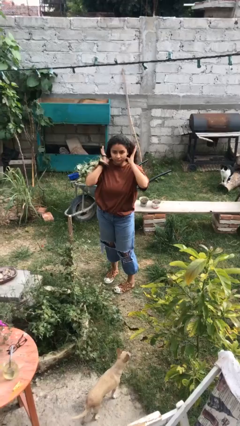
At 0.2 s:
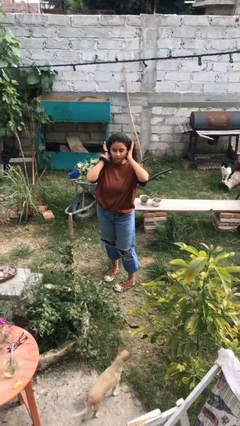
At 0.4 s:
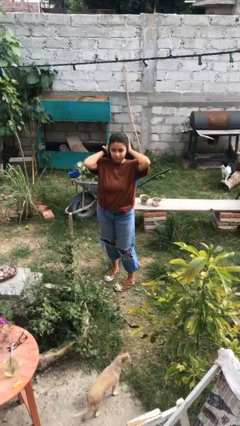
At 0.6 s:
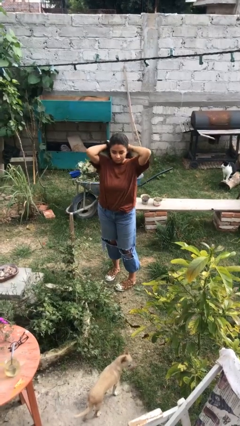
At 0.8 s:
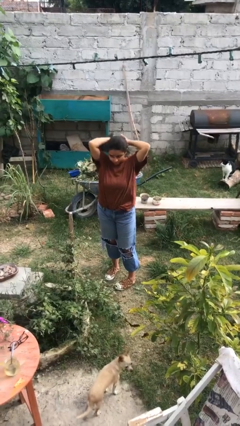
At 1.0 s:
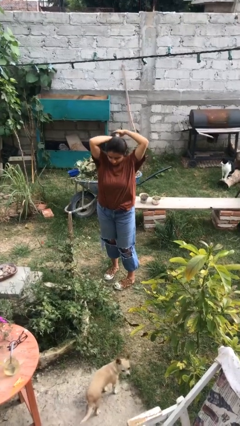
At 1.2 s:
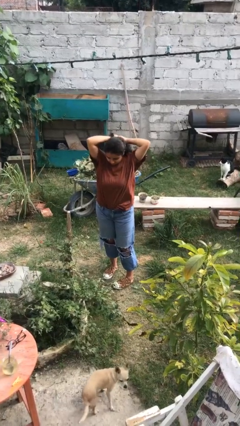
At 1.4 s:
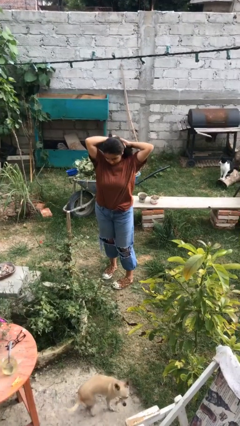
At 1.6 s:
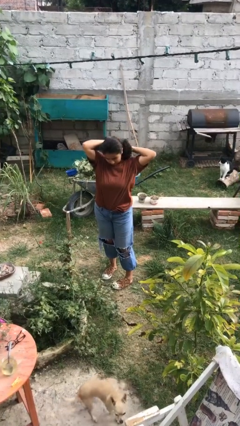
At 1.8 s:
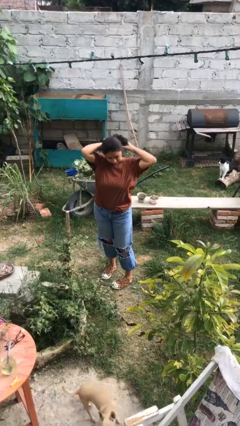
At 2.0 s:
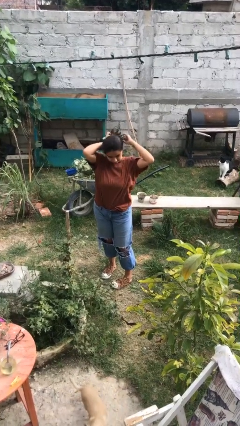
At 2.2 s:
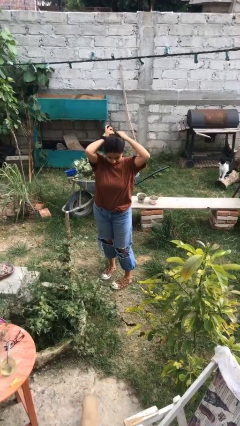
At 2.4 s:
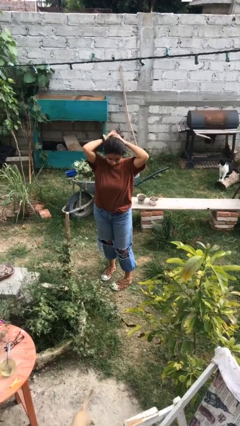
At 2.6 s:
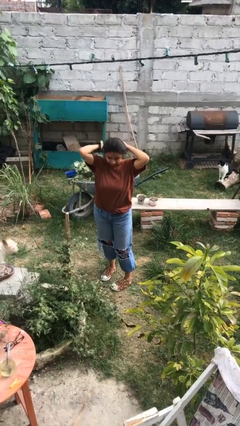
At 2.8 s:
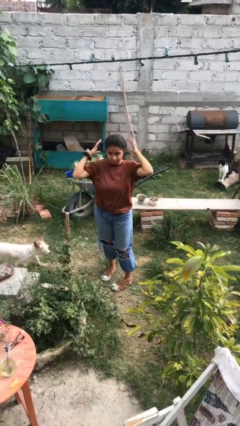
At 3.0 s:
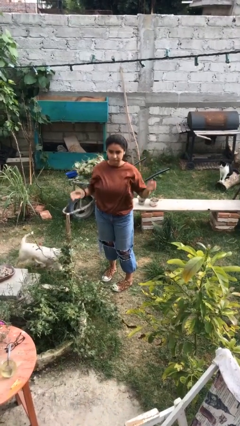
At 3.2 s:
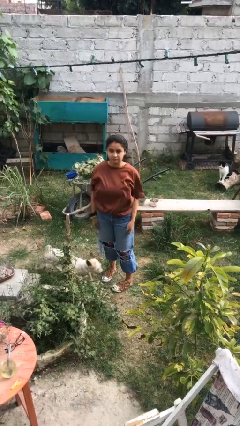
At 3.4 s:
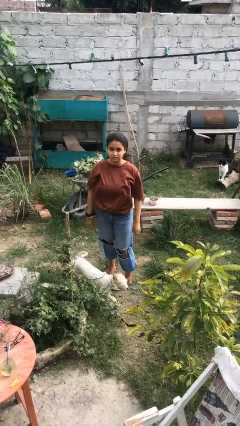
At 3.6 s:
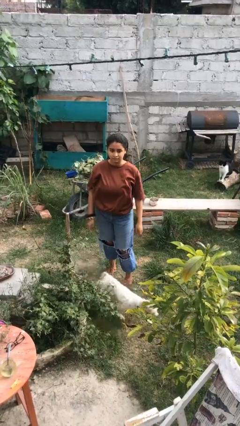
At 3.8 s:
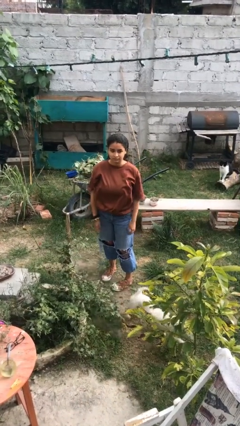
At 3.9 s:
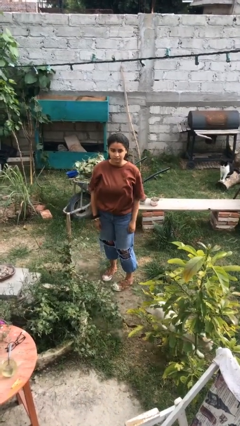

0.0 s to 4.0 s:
person puts hair in ponytail

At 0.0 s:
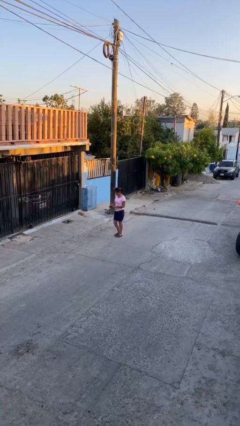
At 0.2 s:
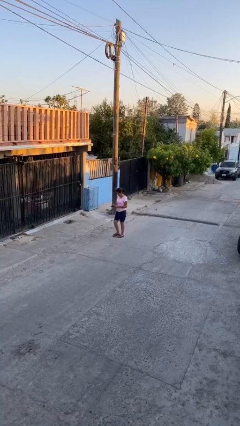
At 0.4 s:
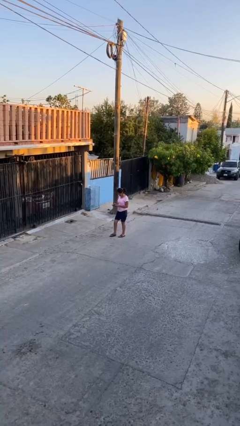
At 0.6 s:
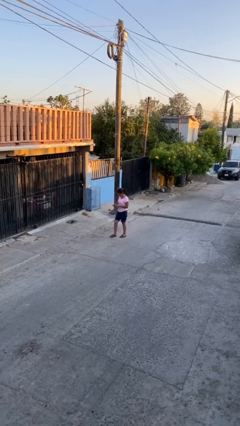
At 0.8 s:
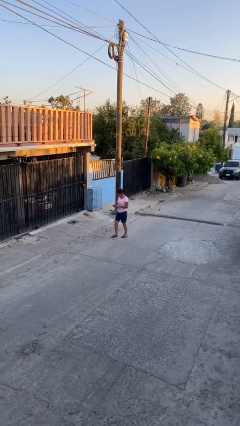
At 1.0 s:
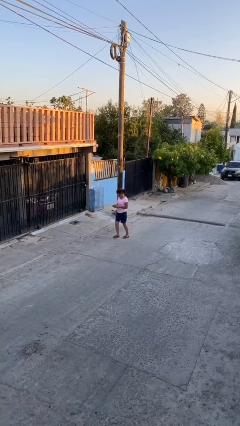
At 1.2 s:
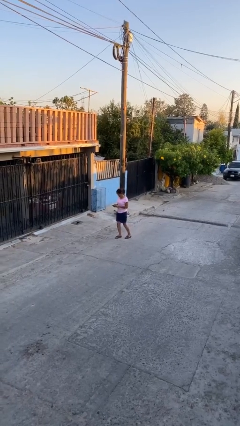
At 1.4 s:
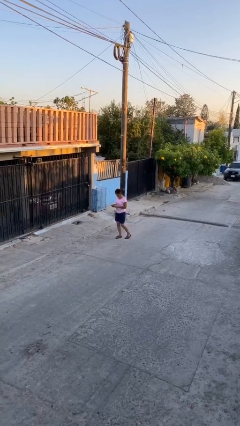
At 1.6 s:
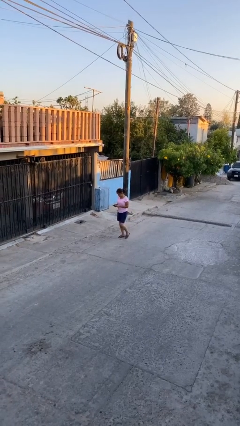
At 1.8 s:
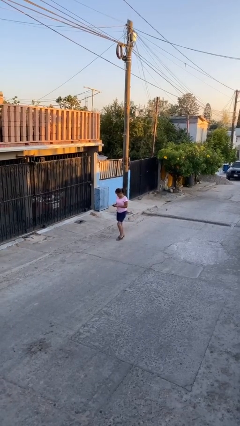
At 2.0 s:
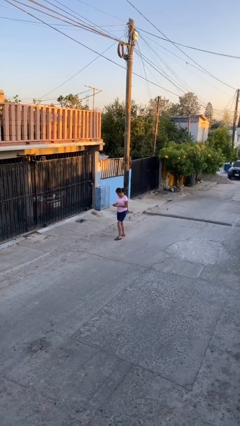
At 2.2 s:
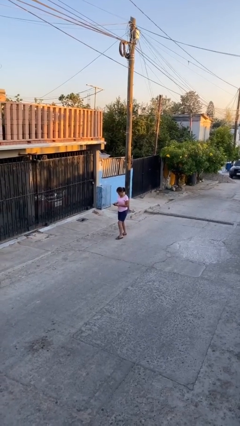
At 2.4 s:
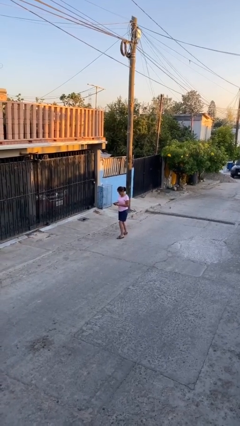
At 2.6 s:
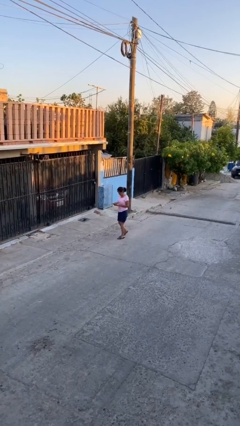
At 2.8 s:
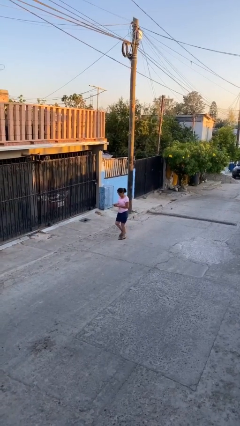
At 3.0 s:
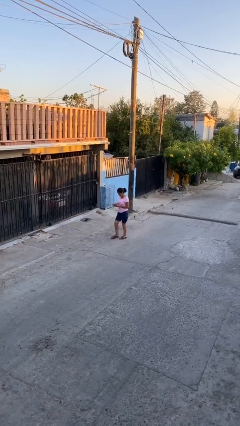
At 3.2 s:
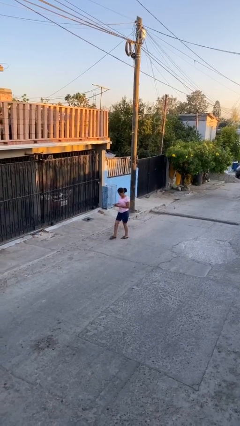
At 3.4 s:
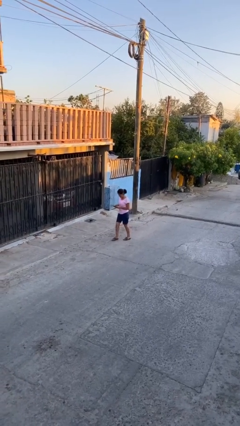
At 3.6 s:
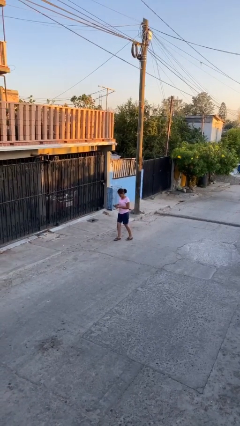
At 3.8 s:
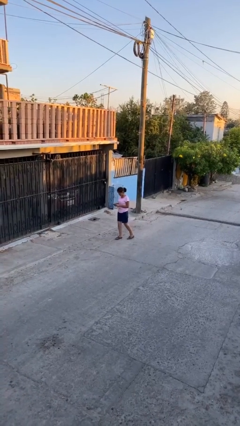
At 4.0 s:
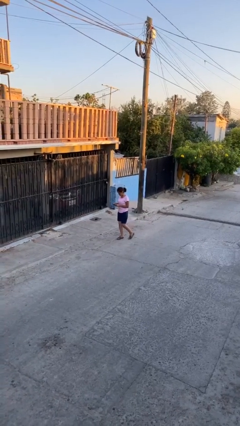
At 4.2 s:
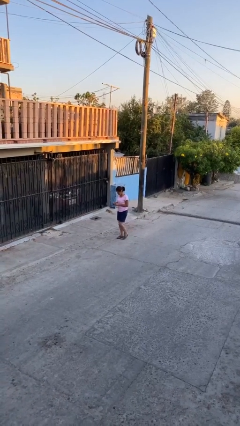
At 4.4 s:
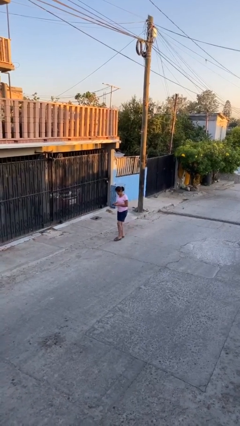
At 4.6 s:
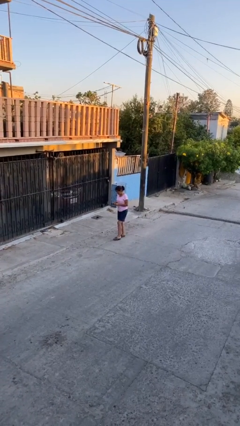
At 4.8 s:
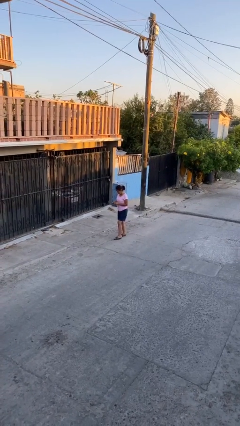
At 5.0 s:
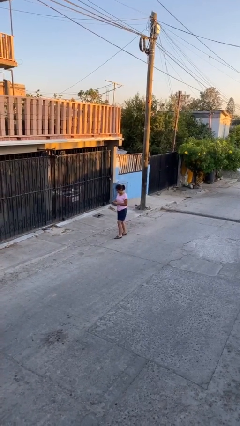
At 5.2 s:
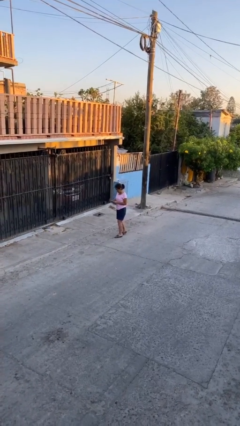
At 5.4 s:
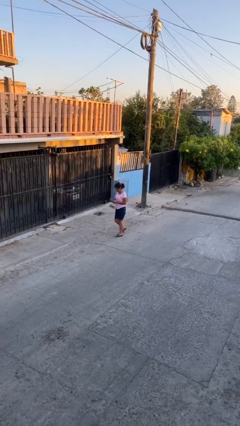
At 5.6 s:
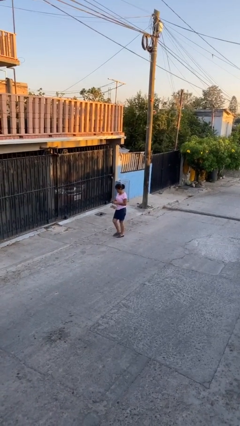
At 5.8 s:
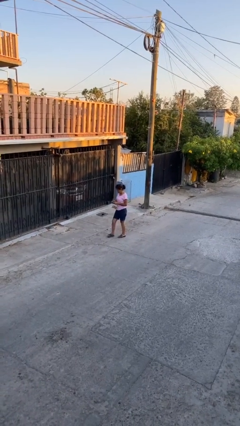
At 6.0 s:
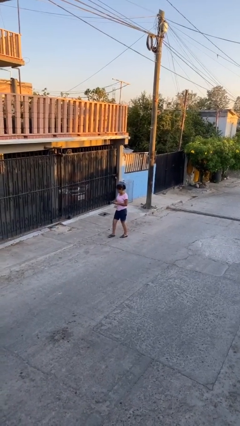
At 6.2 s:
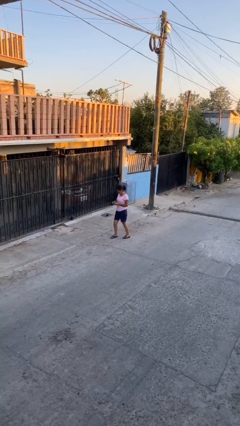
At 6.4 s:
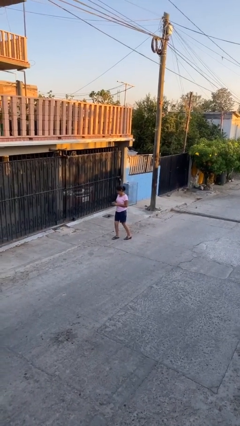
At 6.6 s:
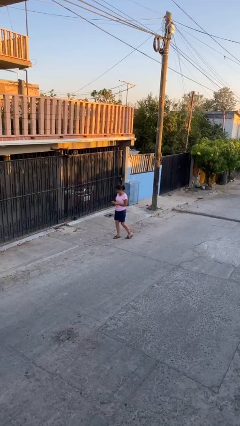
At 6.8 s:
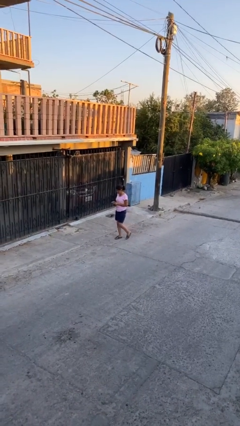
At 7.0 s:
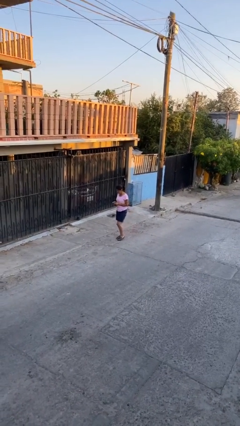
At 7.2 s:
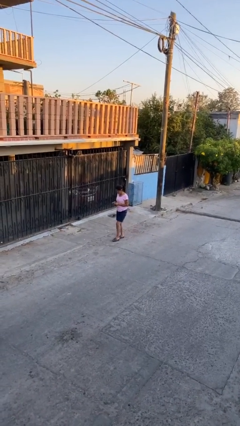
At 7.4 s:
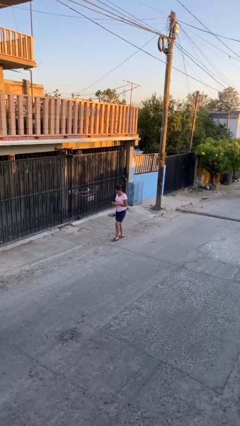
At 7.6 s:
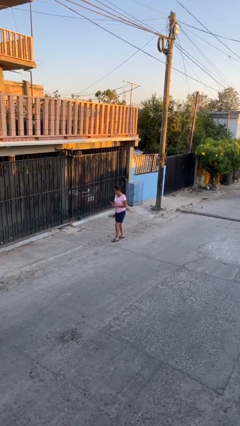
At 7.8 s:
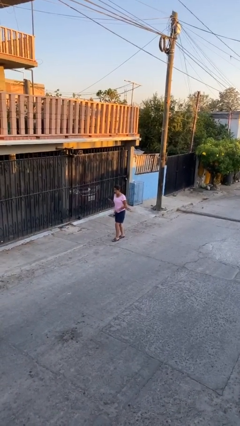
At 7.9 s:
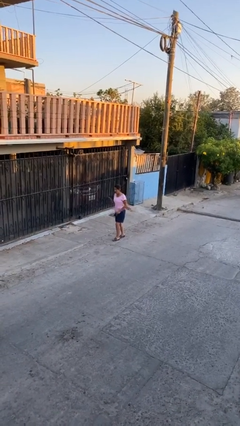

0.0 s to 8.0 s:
person texts on phone

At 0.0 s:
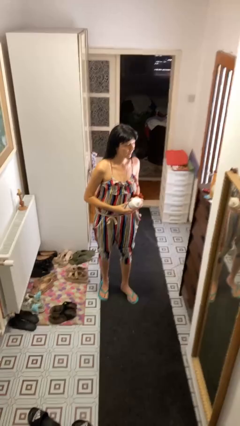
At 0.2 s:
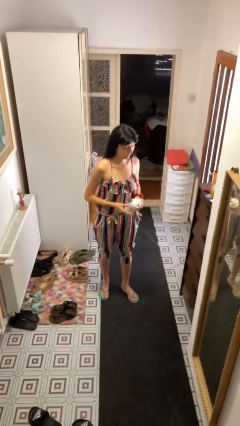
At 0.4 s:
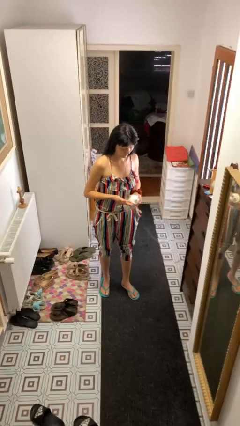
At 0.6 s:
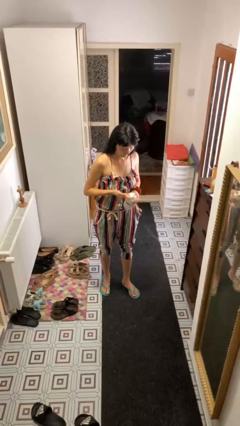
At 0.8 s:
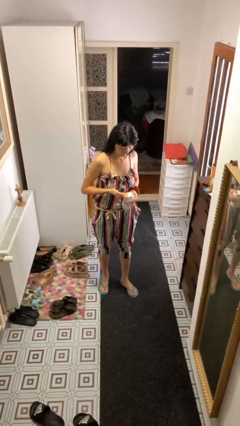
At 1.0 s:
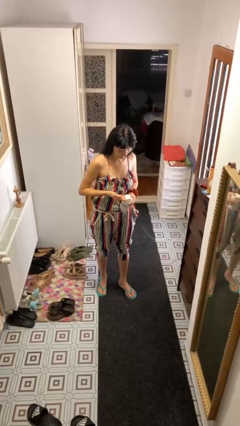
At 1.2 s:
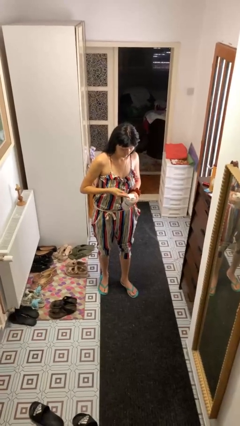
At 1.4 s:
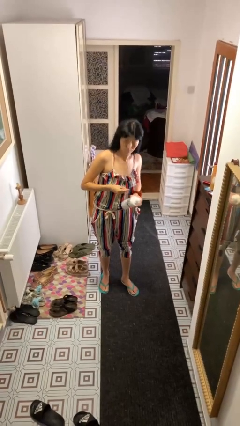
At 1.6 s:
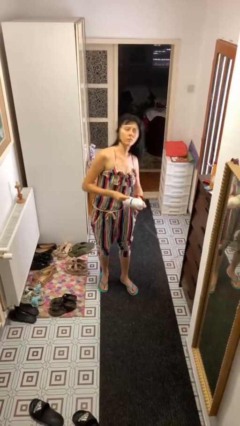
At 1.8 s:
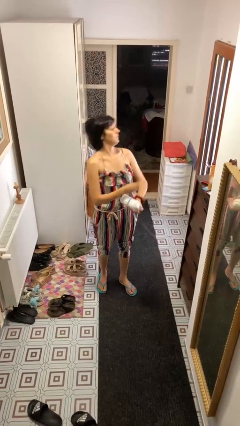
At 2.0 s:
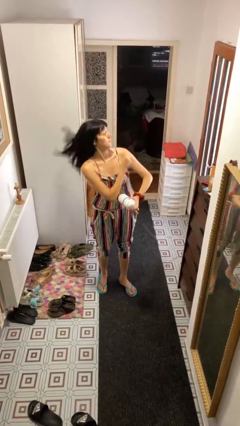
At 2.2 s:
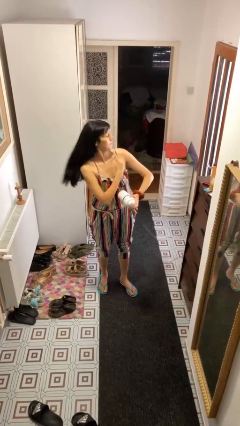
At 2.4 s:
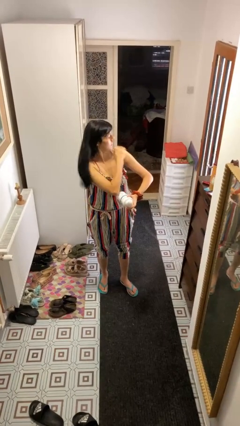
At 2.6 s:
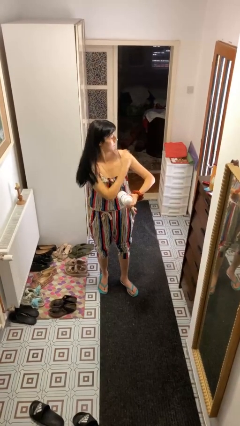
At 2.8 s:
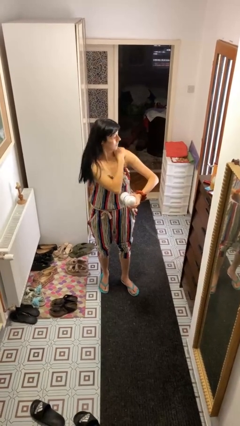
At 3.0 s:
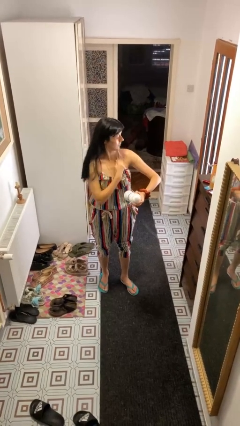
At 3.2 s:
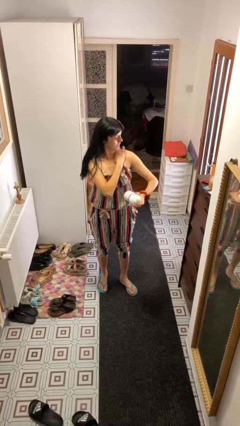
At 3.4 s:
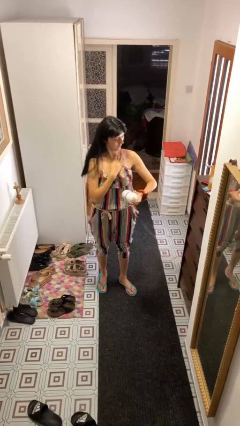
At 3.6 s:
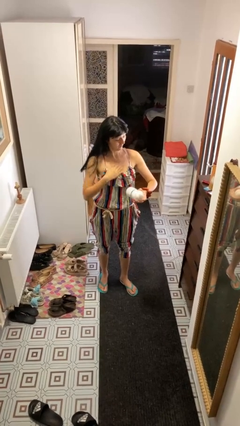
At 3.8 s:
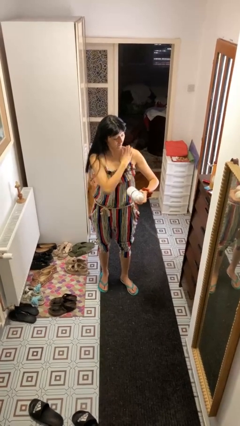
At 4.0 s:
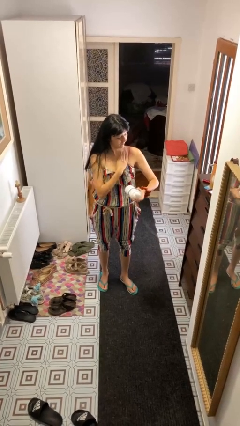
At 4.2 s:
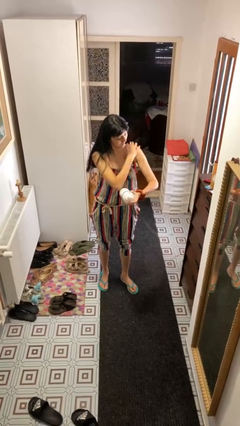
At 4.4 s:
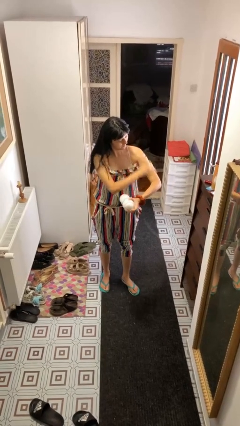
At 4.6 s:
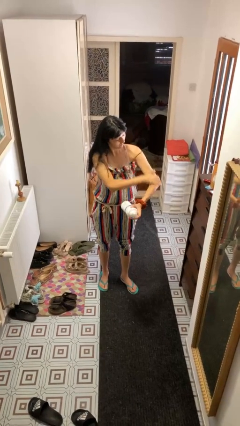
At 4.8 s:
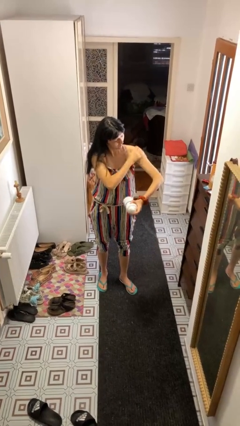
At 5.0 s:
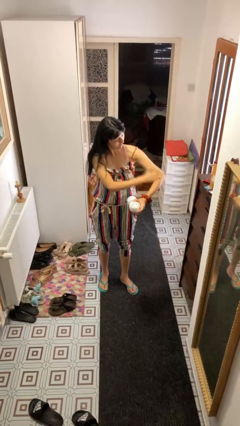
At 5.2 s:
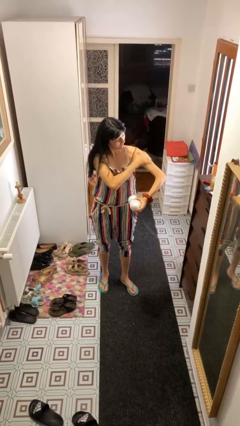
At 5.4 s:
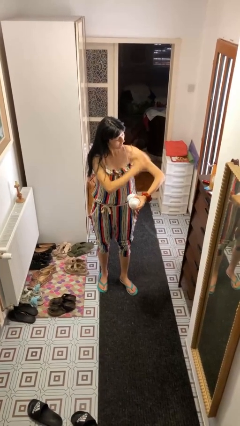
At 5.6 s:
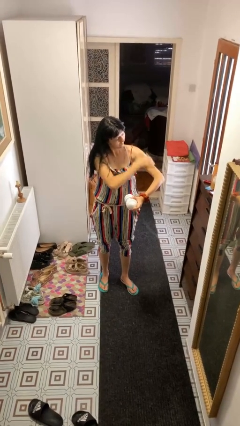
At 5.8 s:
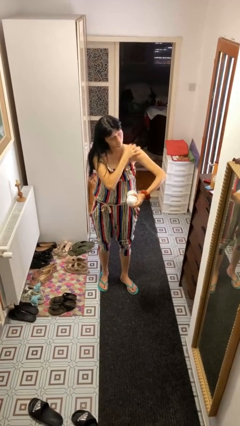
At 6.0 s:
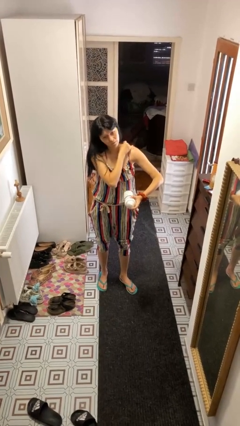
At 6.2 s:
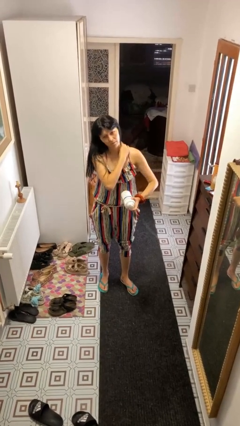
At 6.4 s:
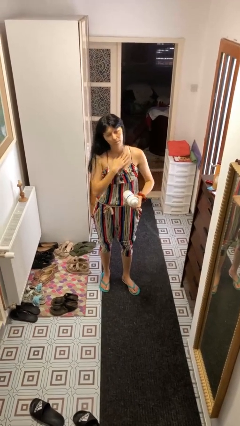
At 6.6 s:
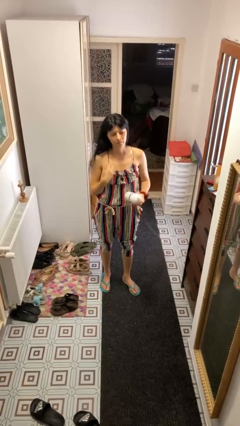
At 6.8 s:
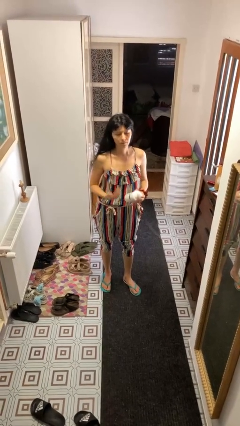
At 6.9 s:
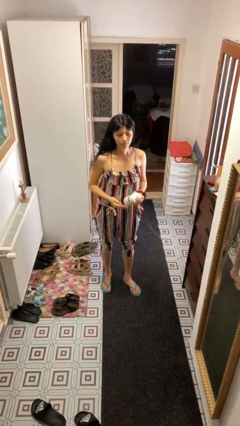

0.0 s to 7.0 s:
person applies sunscreen
